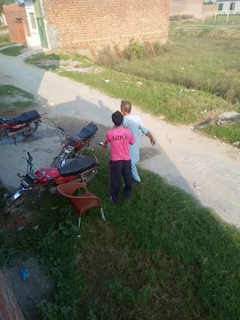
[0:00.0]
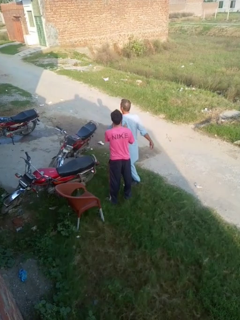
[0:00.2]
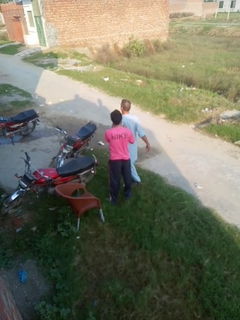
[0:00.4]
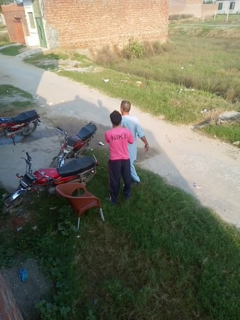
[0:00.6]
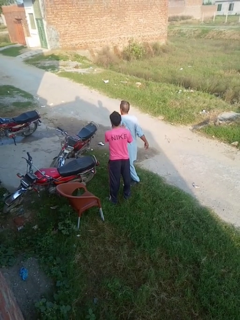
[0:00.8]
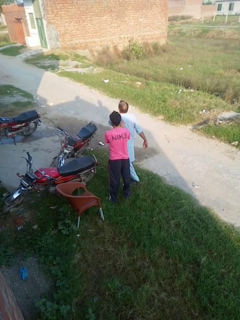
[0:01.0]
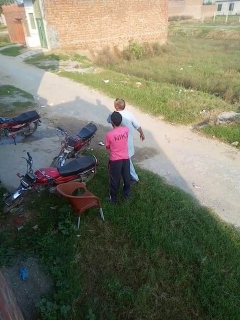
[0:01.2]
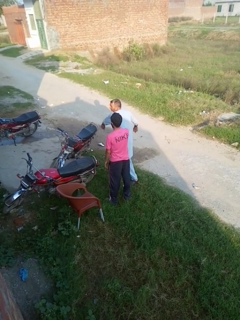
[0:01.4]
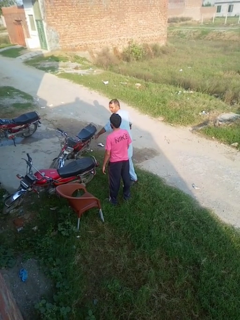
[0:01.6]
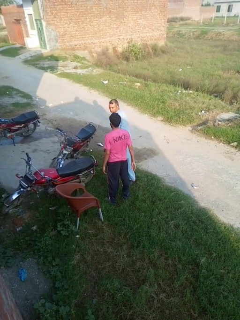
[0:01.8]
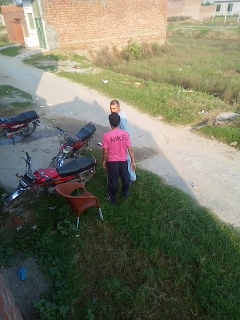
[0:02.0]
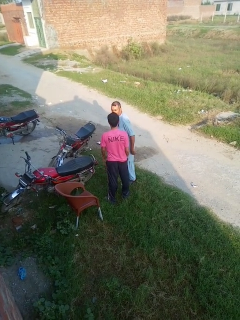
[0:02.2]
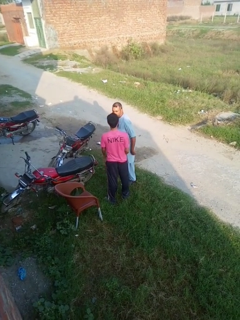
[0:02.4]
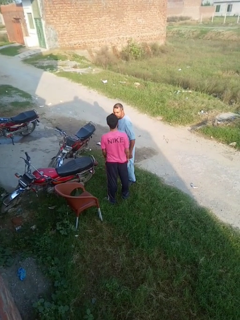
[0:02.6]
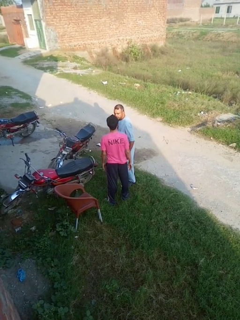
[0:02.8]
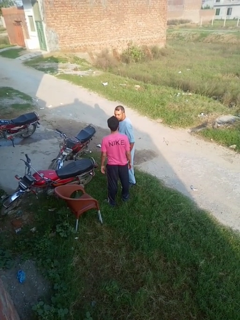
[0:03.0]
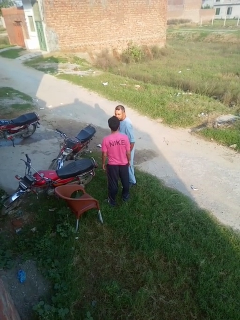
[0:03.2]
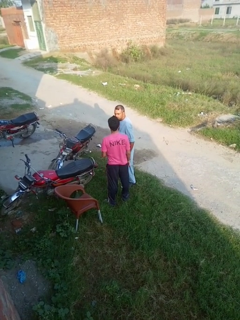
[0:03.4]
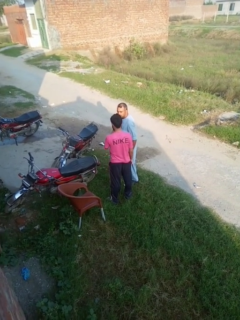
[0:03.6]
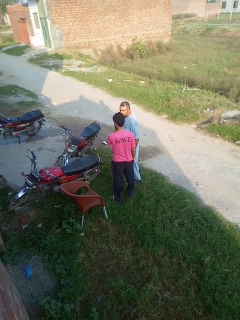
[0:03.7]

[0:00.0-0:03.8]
person spins person around

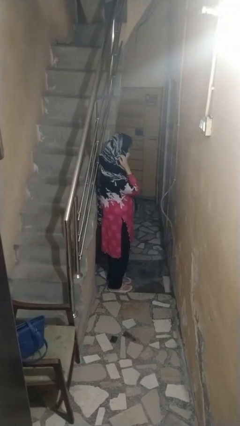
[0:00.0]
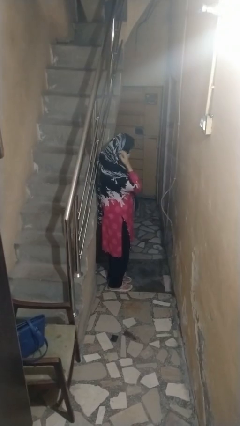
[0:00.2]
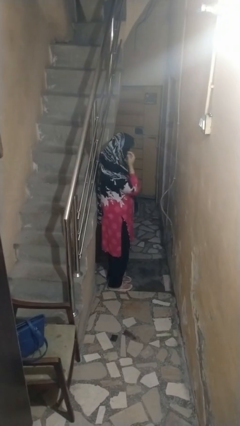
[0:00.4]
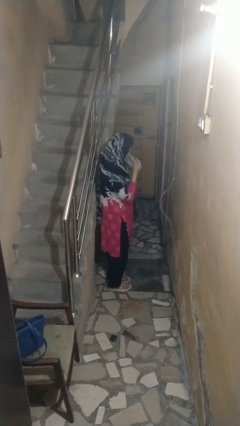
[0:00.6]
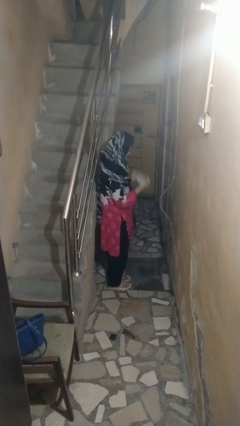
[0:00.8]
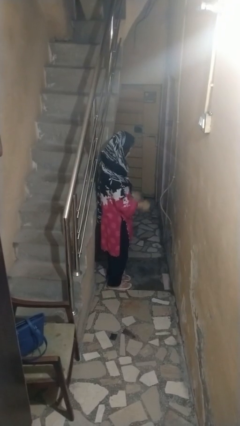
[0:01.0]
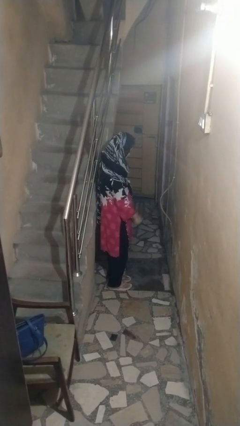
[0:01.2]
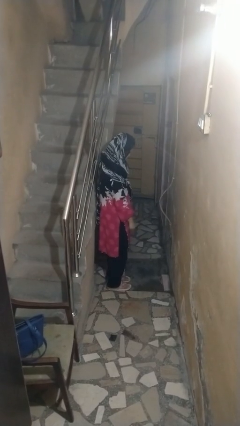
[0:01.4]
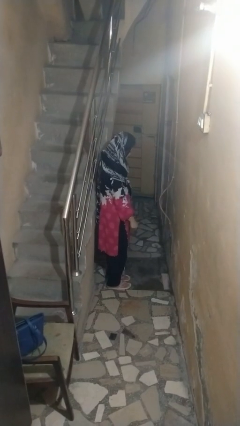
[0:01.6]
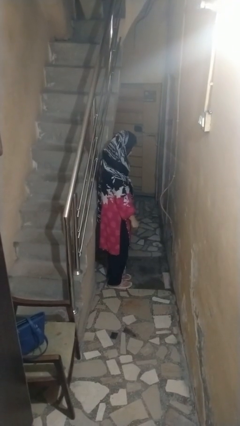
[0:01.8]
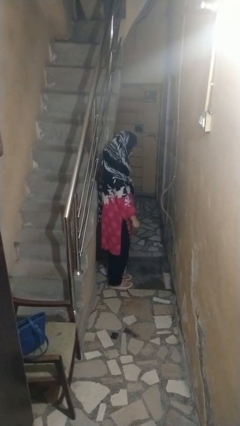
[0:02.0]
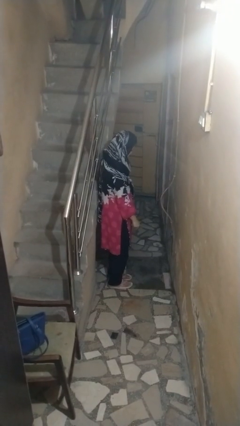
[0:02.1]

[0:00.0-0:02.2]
person takes off facemask

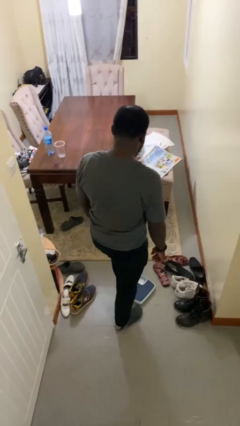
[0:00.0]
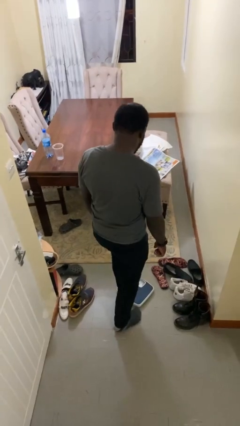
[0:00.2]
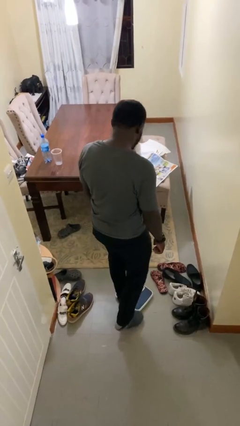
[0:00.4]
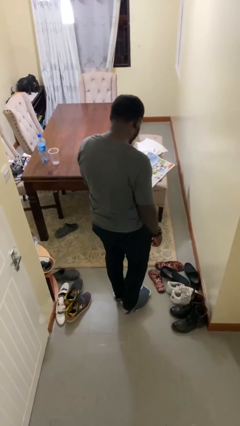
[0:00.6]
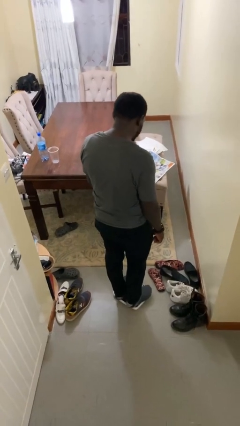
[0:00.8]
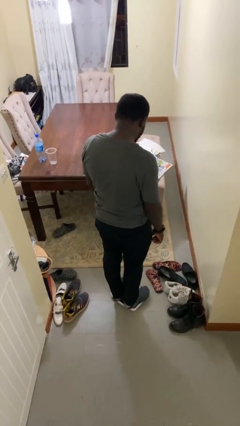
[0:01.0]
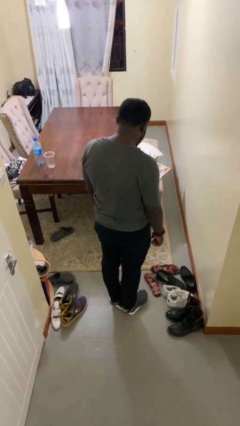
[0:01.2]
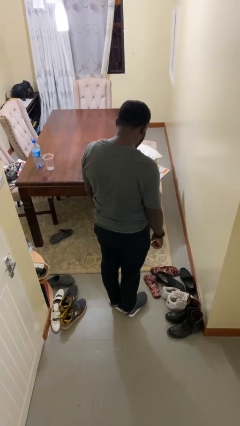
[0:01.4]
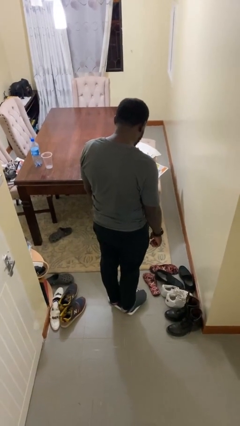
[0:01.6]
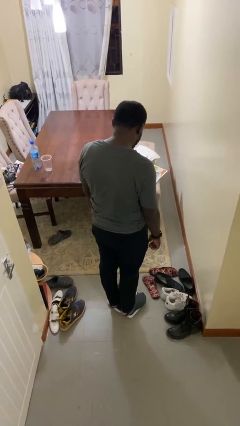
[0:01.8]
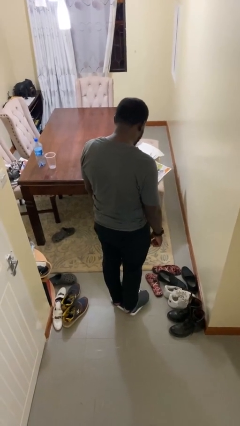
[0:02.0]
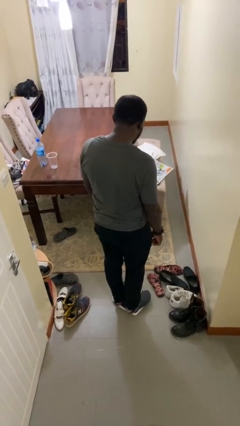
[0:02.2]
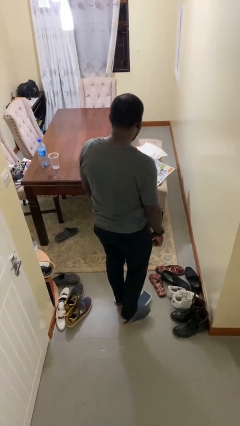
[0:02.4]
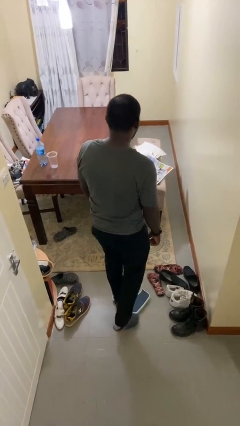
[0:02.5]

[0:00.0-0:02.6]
person uses bodyweight scale

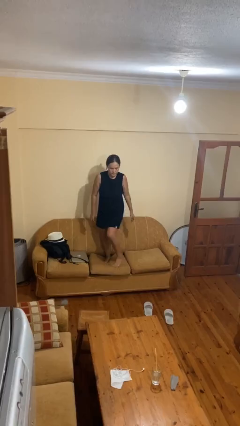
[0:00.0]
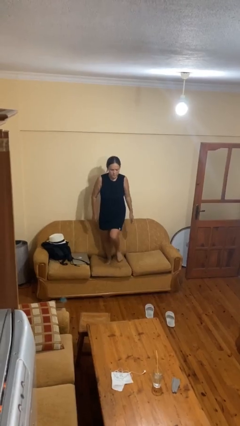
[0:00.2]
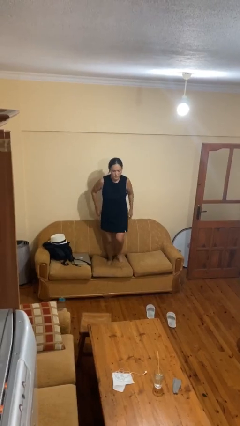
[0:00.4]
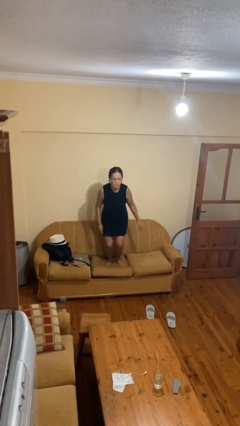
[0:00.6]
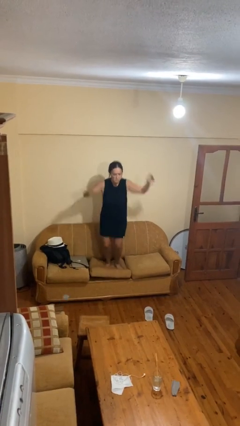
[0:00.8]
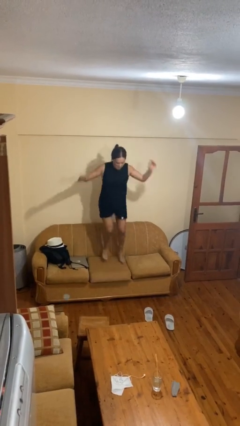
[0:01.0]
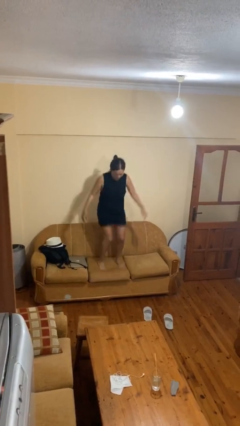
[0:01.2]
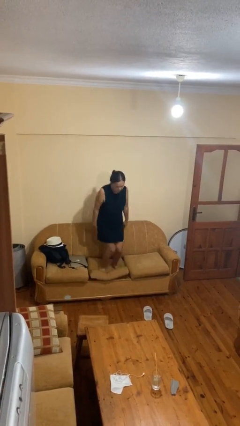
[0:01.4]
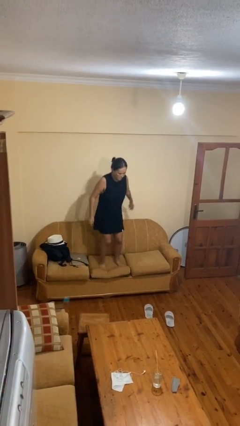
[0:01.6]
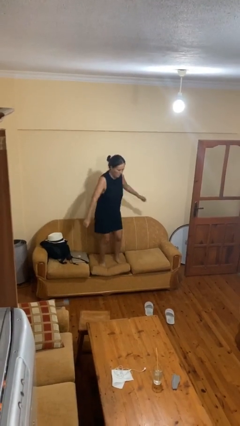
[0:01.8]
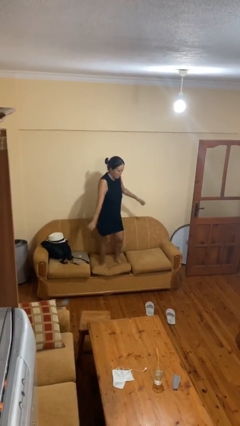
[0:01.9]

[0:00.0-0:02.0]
person jumps on couch

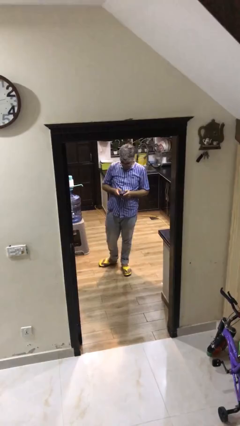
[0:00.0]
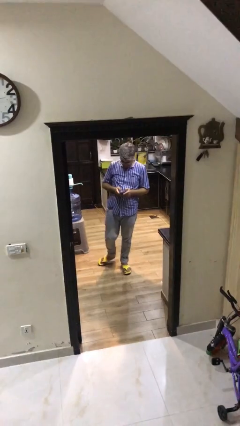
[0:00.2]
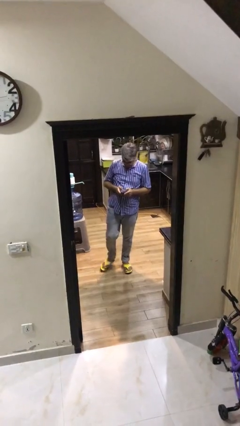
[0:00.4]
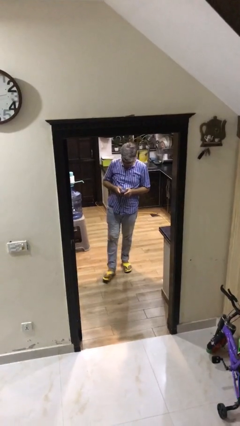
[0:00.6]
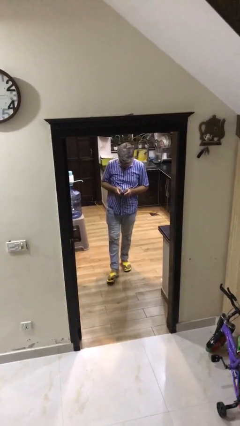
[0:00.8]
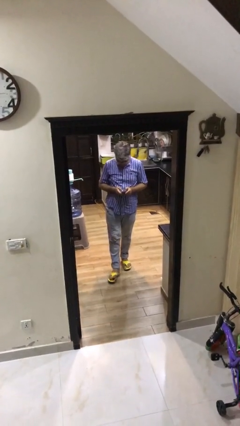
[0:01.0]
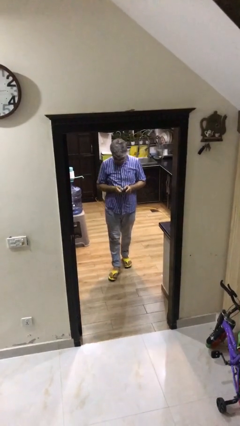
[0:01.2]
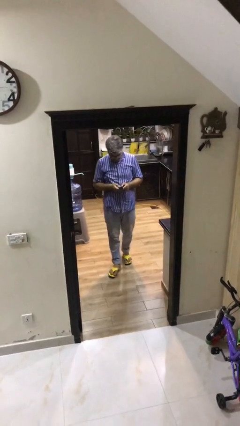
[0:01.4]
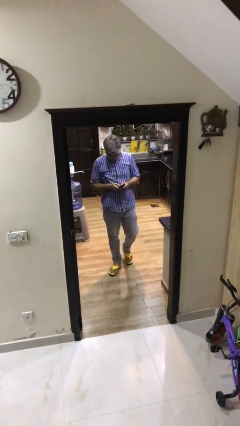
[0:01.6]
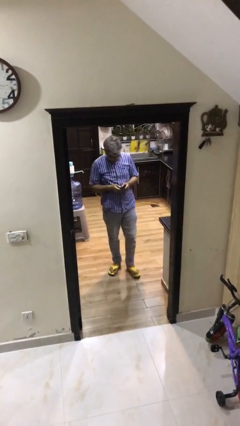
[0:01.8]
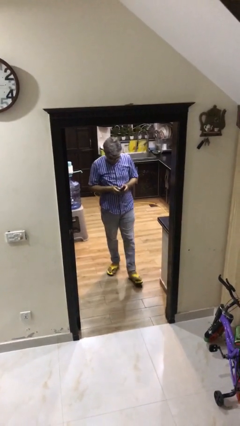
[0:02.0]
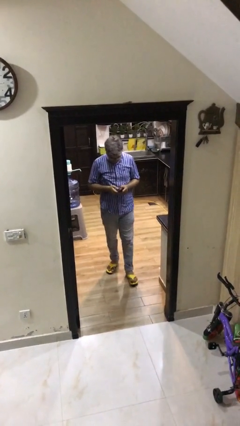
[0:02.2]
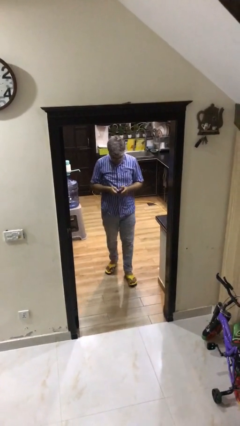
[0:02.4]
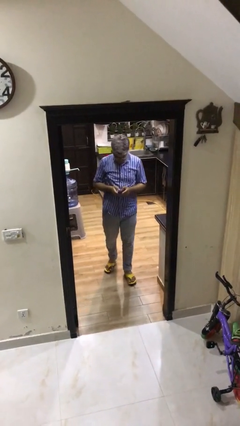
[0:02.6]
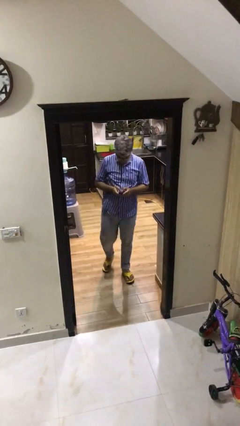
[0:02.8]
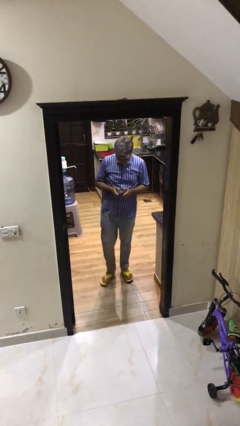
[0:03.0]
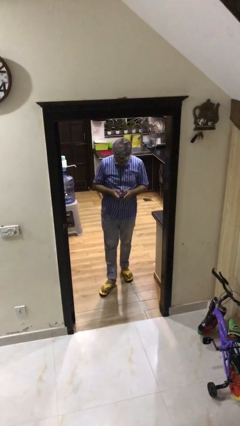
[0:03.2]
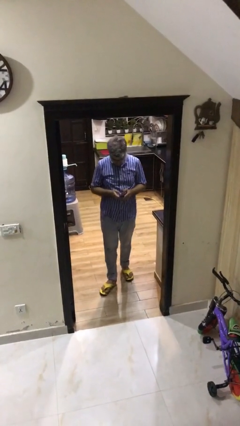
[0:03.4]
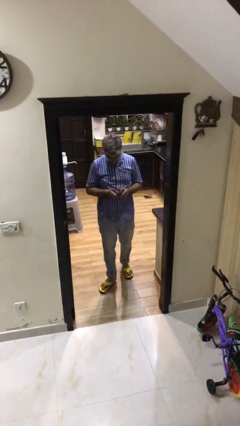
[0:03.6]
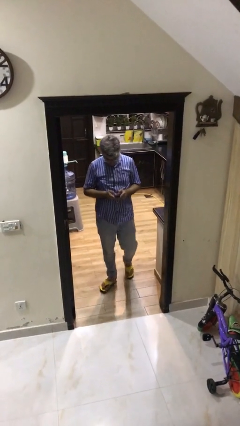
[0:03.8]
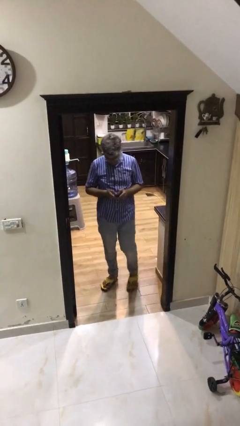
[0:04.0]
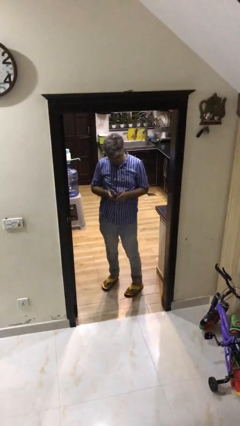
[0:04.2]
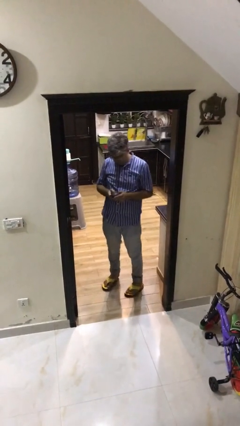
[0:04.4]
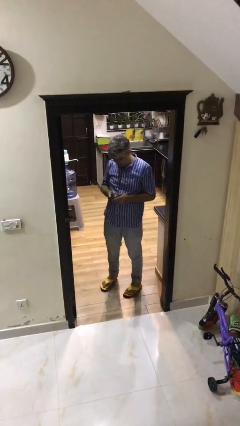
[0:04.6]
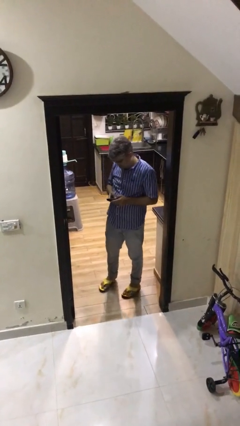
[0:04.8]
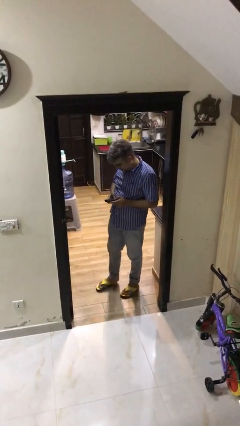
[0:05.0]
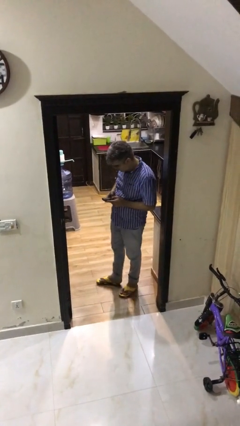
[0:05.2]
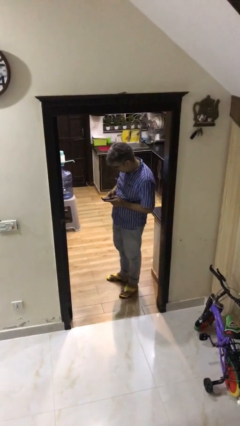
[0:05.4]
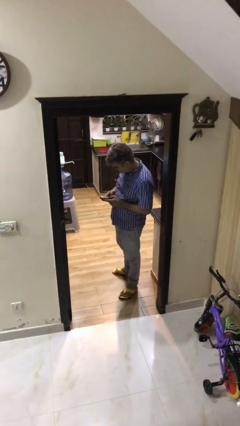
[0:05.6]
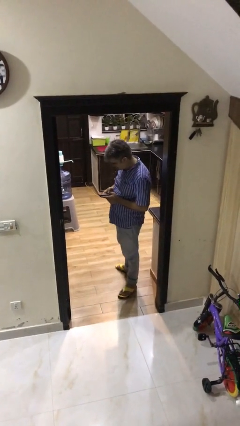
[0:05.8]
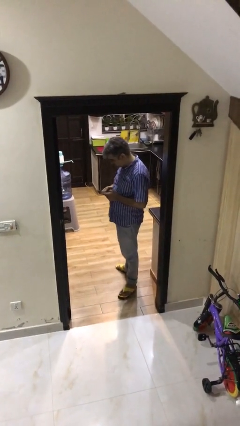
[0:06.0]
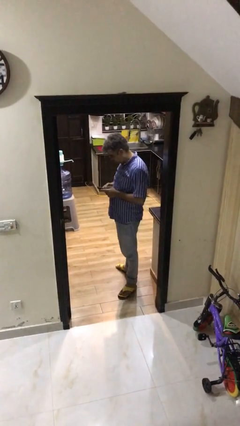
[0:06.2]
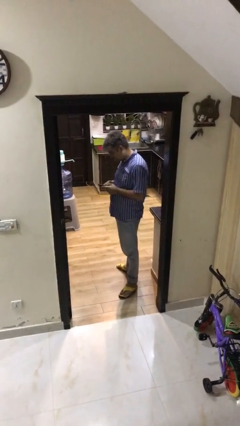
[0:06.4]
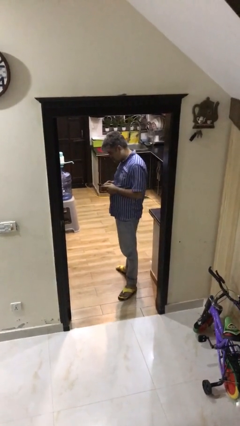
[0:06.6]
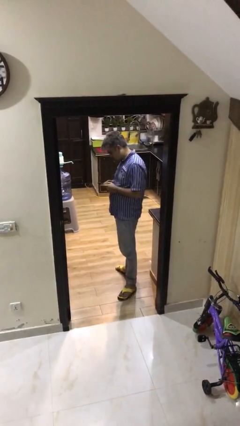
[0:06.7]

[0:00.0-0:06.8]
person texts on phone

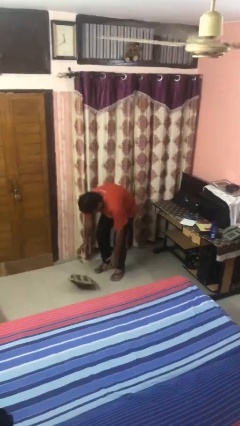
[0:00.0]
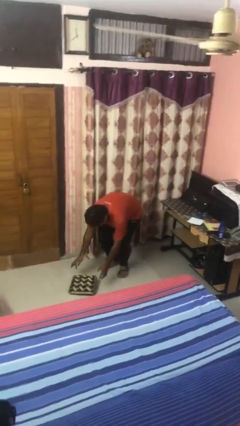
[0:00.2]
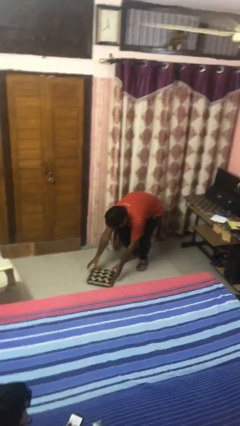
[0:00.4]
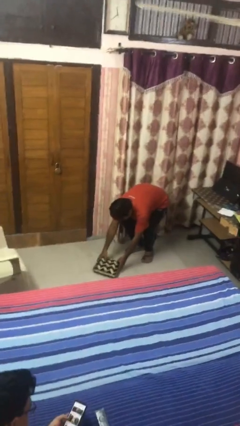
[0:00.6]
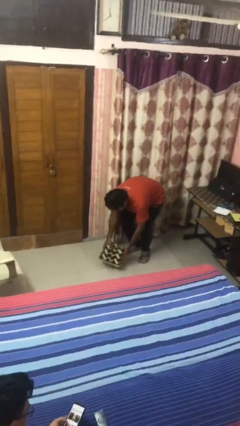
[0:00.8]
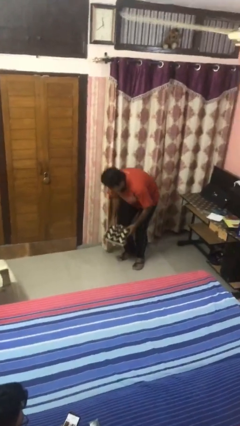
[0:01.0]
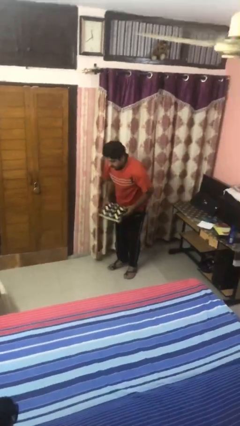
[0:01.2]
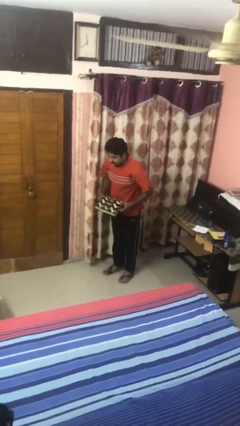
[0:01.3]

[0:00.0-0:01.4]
person picks up object from floor
